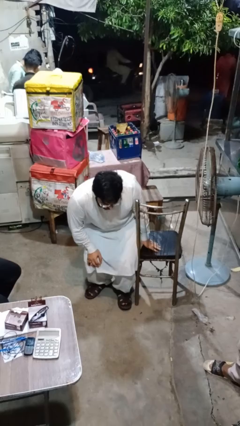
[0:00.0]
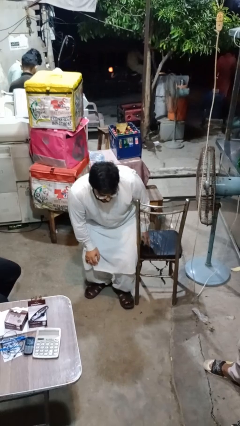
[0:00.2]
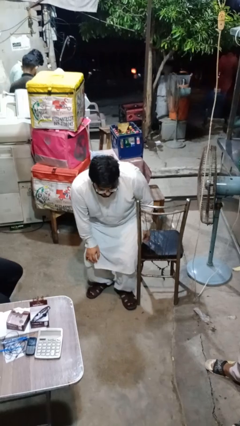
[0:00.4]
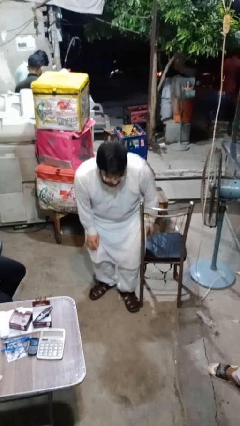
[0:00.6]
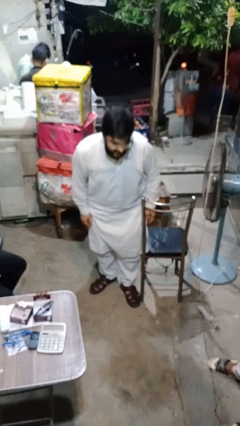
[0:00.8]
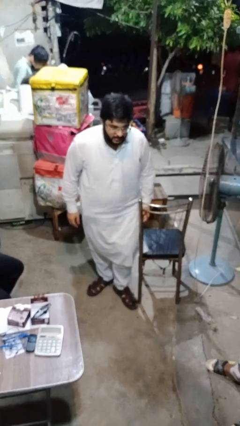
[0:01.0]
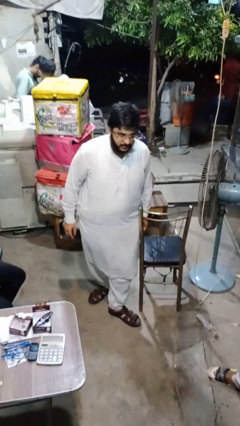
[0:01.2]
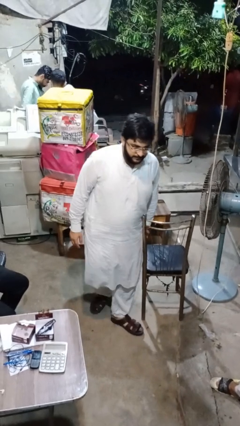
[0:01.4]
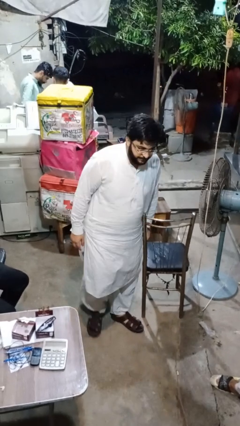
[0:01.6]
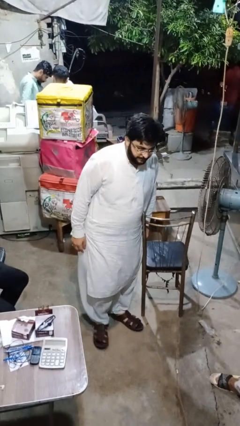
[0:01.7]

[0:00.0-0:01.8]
person stands up from floor

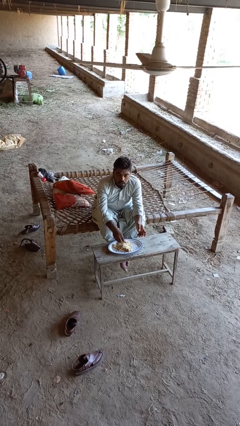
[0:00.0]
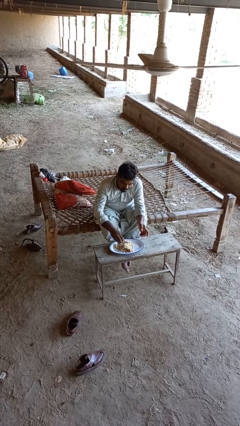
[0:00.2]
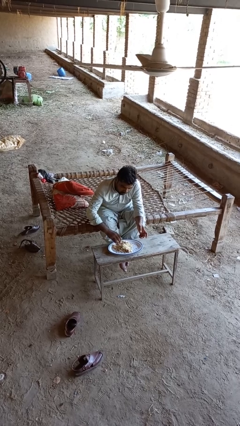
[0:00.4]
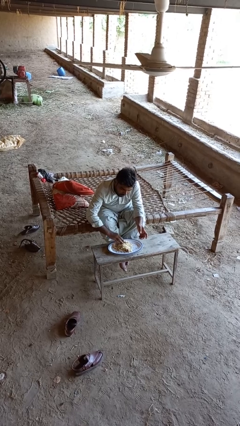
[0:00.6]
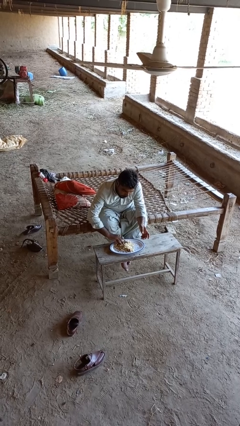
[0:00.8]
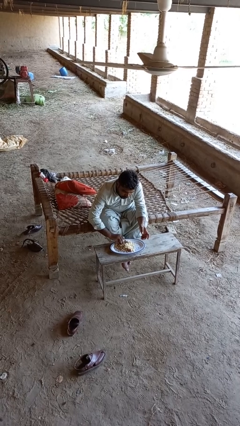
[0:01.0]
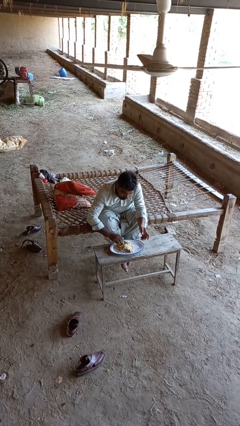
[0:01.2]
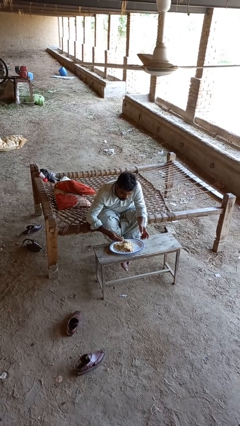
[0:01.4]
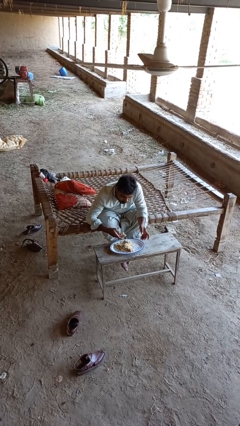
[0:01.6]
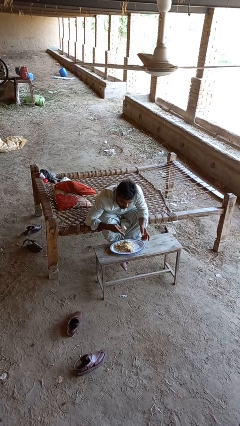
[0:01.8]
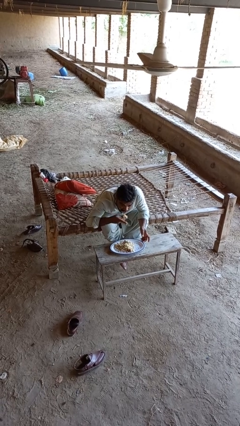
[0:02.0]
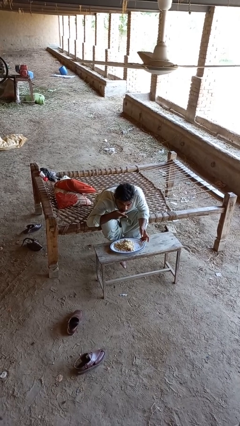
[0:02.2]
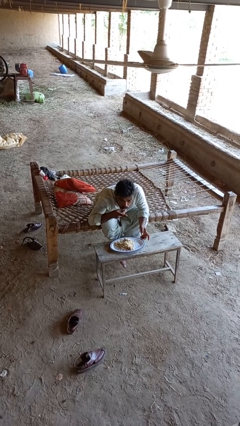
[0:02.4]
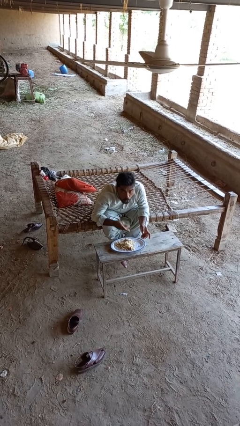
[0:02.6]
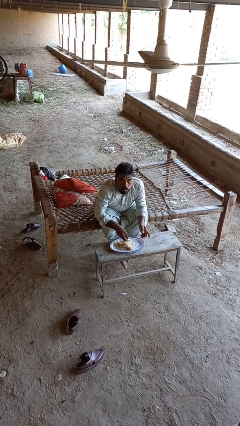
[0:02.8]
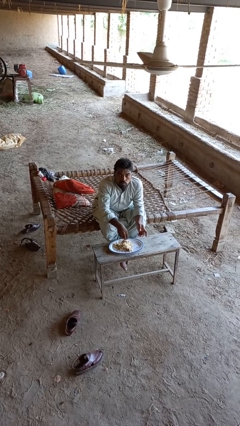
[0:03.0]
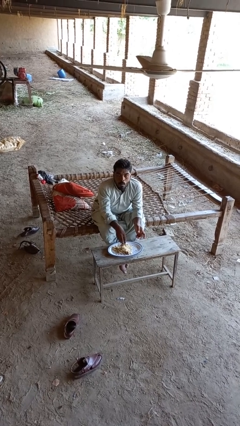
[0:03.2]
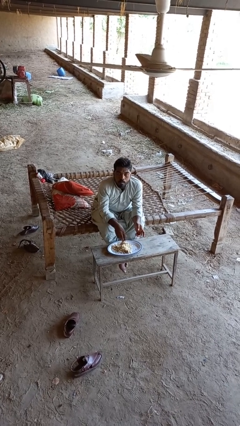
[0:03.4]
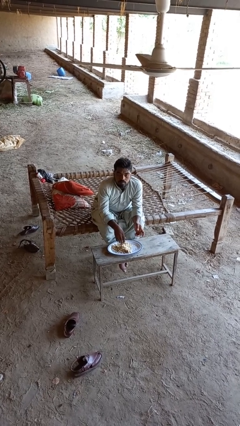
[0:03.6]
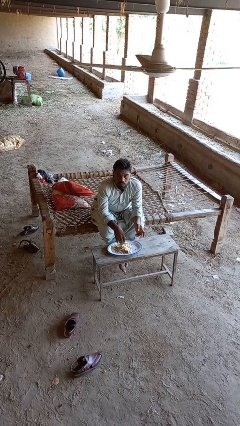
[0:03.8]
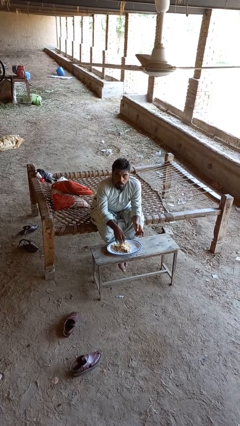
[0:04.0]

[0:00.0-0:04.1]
person eats with hands

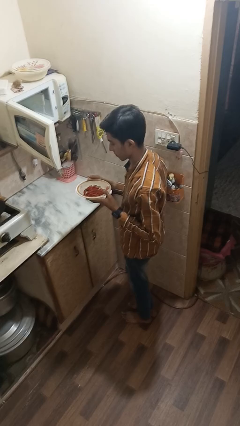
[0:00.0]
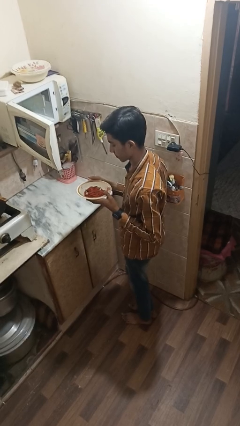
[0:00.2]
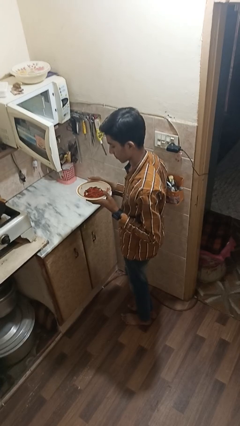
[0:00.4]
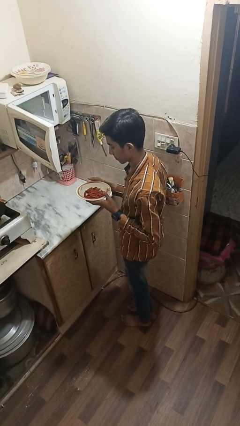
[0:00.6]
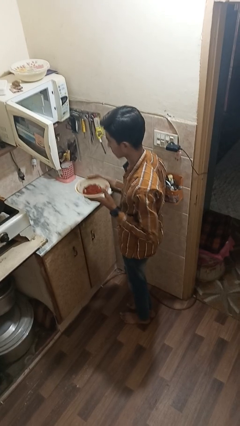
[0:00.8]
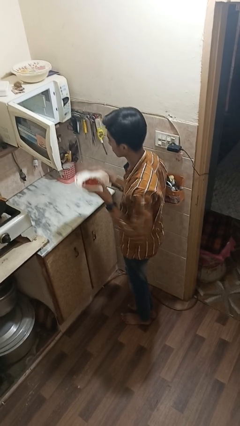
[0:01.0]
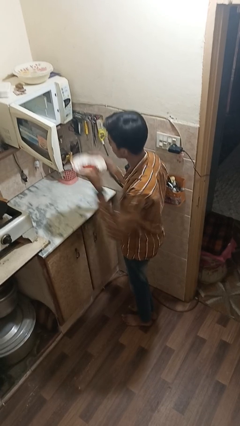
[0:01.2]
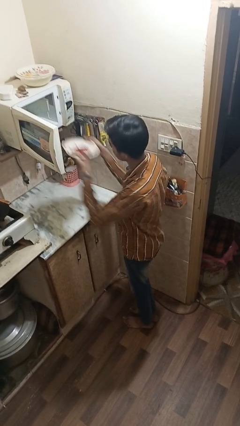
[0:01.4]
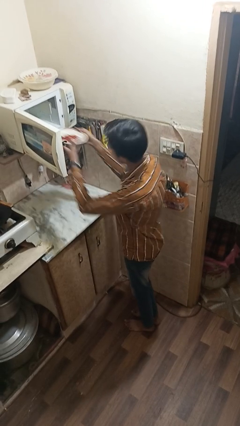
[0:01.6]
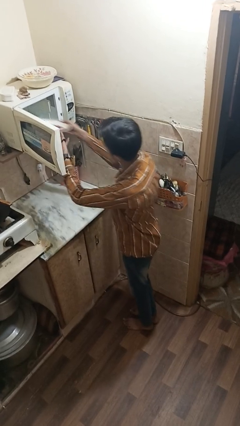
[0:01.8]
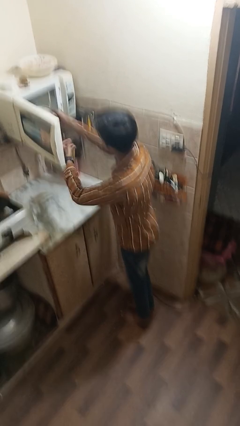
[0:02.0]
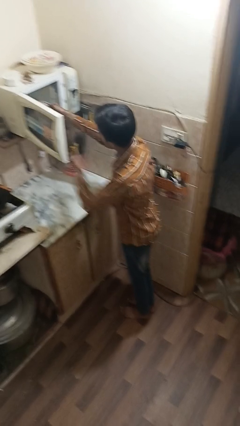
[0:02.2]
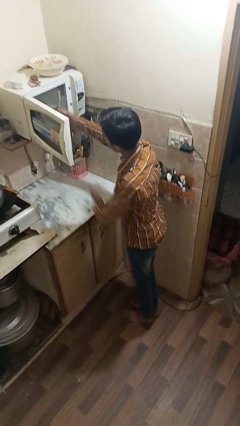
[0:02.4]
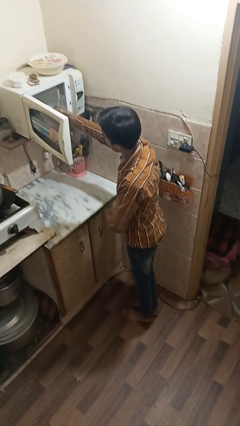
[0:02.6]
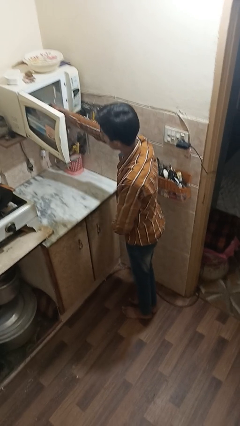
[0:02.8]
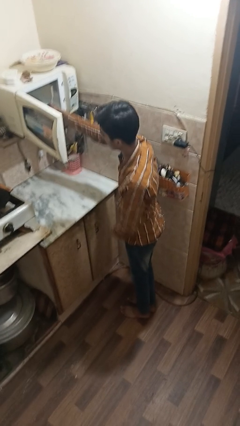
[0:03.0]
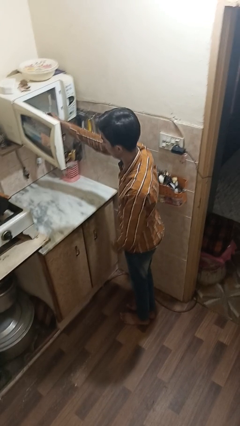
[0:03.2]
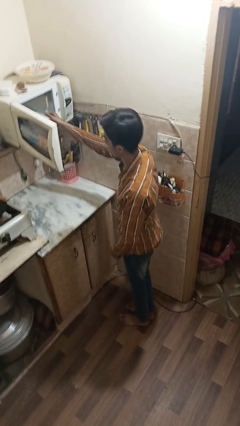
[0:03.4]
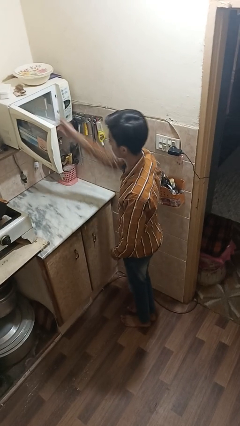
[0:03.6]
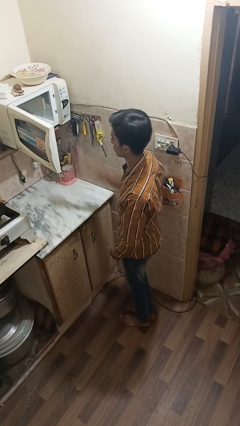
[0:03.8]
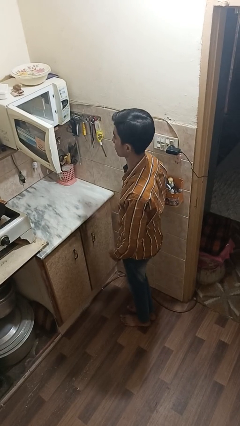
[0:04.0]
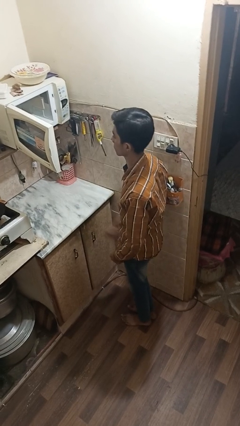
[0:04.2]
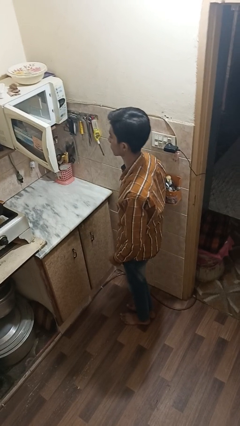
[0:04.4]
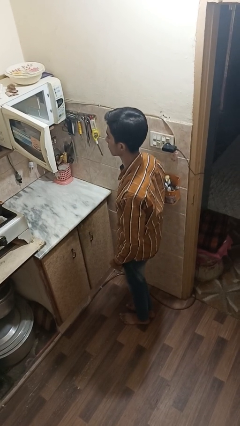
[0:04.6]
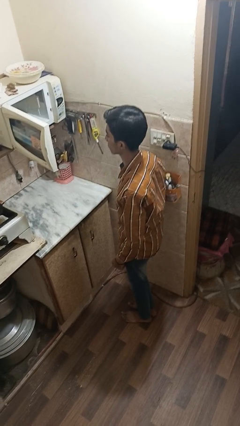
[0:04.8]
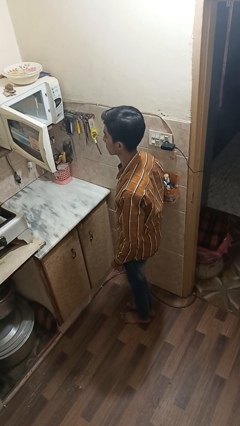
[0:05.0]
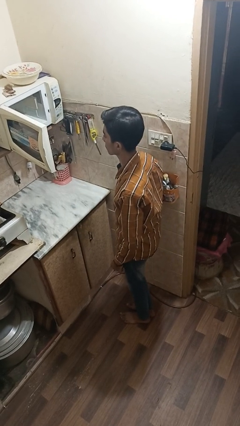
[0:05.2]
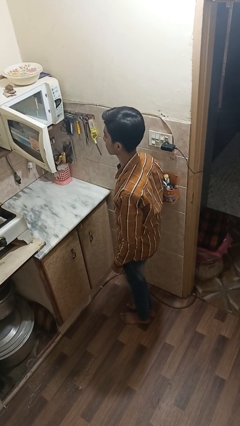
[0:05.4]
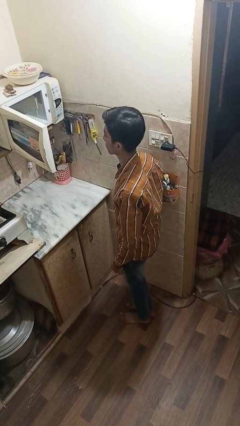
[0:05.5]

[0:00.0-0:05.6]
person puts object into microwave

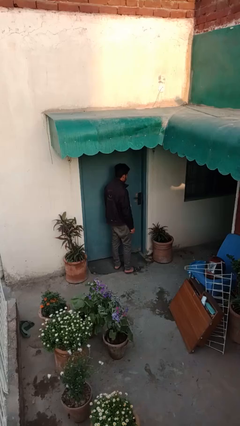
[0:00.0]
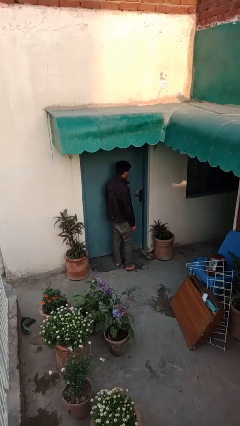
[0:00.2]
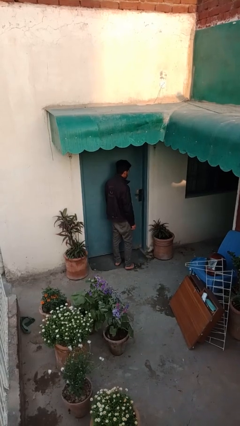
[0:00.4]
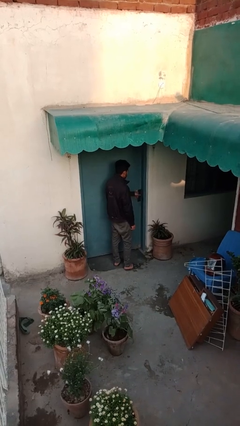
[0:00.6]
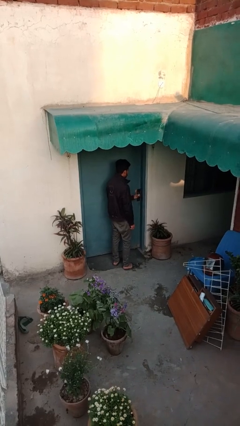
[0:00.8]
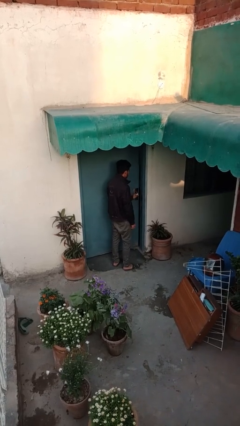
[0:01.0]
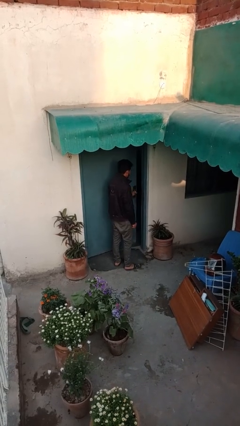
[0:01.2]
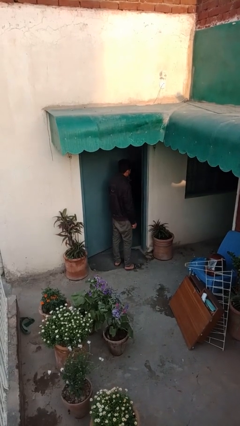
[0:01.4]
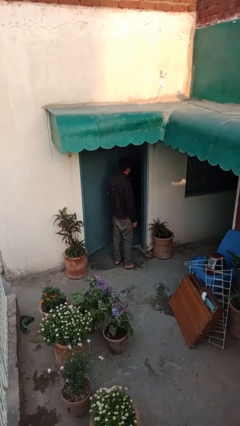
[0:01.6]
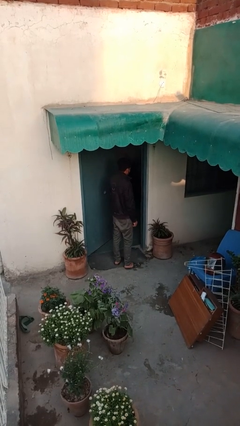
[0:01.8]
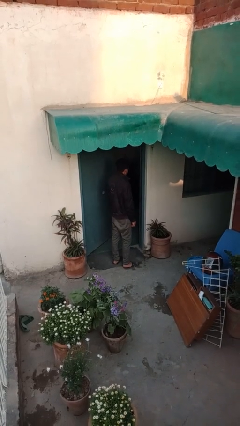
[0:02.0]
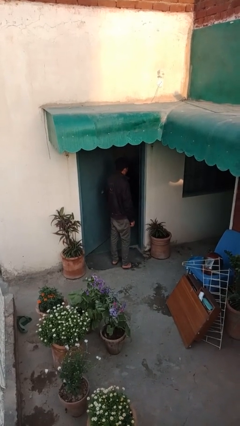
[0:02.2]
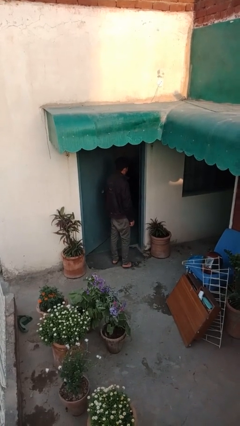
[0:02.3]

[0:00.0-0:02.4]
person opens facility door

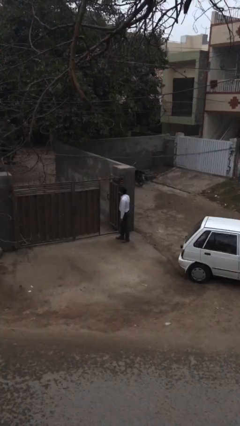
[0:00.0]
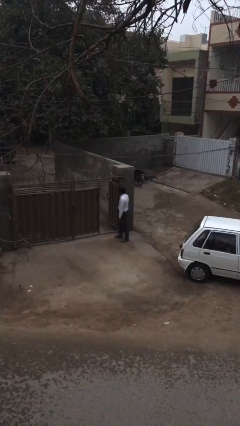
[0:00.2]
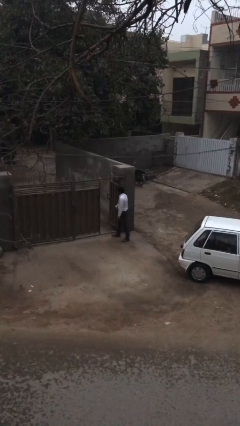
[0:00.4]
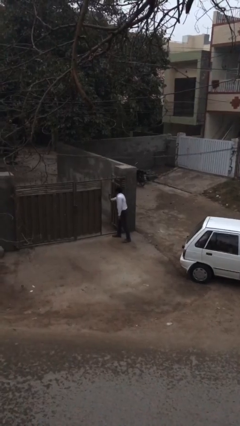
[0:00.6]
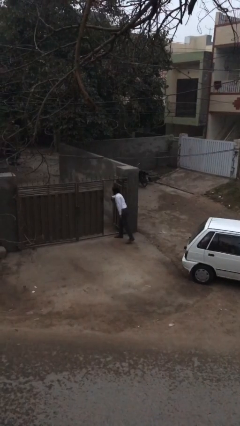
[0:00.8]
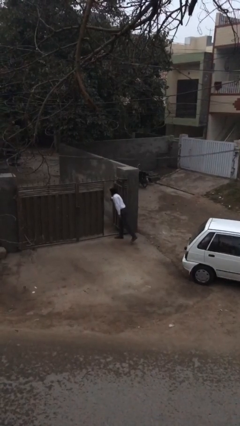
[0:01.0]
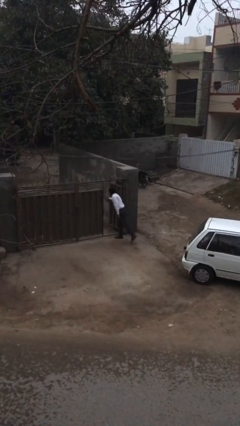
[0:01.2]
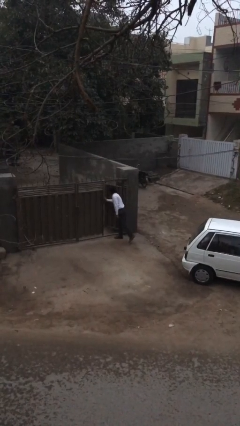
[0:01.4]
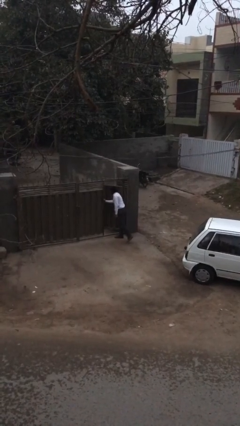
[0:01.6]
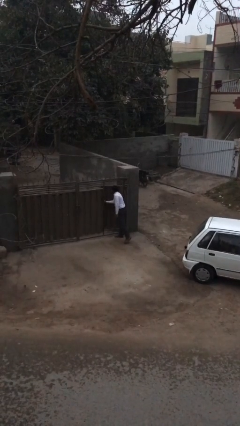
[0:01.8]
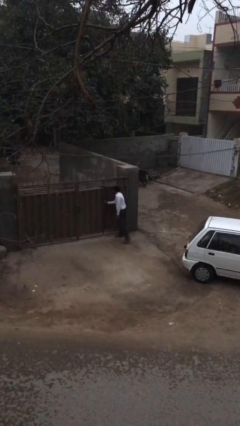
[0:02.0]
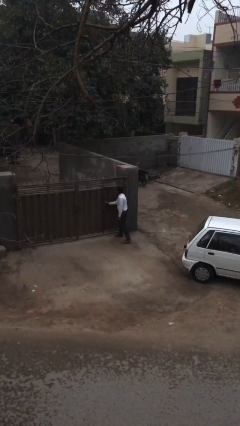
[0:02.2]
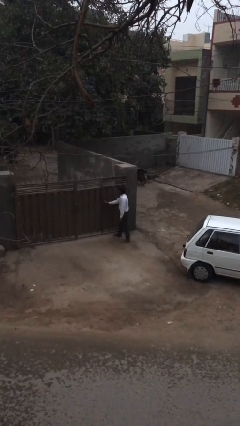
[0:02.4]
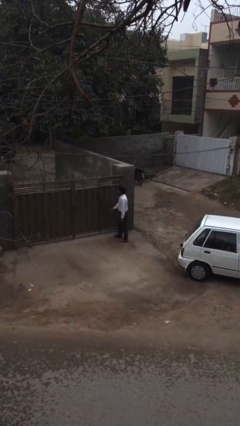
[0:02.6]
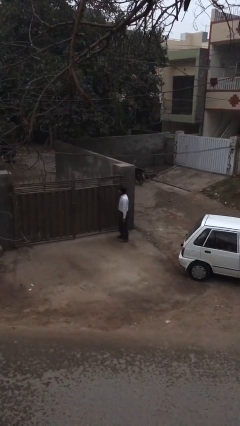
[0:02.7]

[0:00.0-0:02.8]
person closes facility door

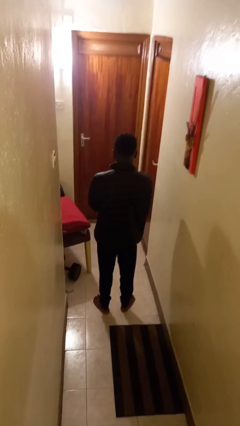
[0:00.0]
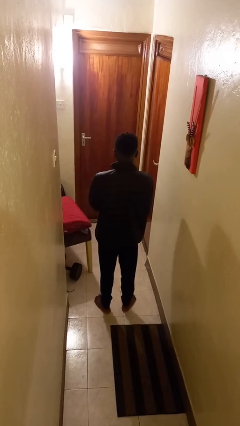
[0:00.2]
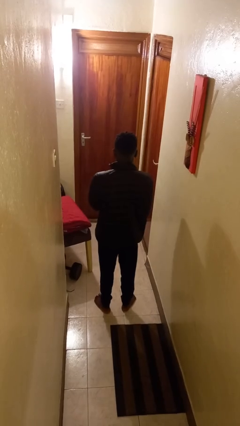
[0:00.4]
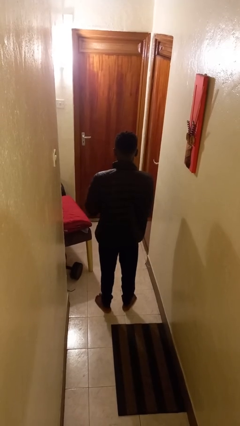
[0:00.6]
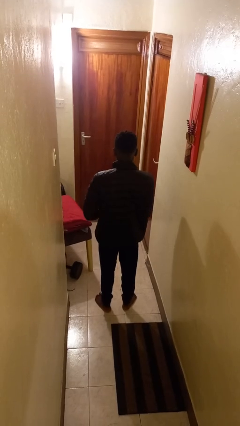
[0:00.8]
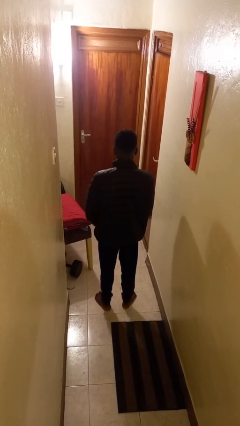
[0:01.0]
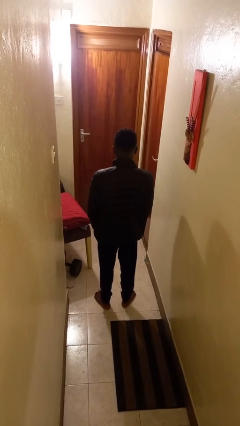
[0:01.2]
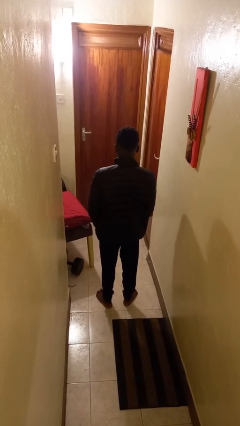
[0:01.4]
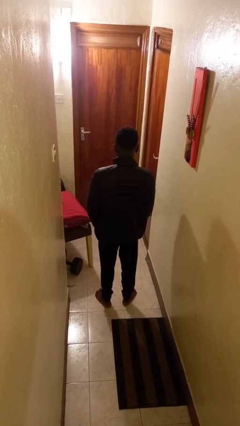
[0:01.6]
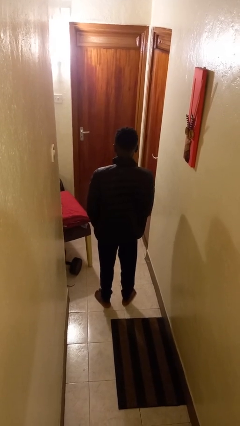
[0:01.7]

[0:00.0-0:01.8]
person unzips jacket
